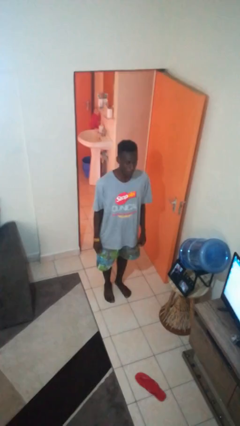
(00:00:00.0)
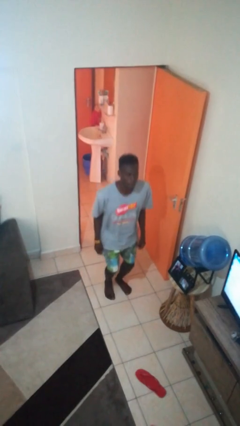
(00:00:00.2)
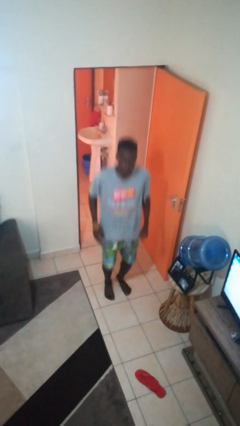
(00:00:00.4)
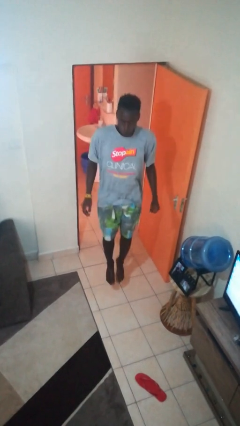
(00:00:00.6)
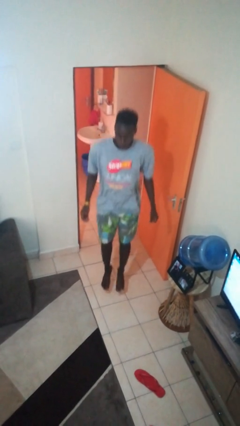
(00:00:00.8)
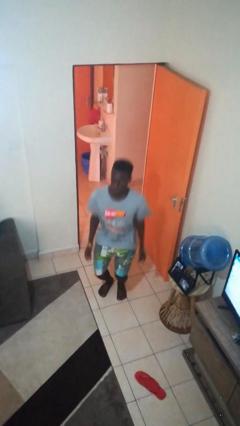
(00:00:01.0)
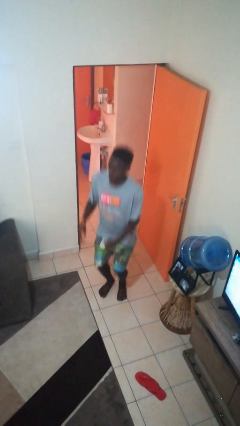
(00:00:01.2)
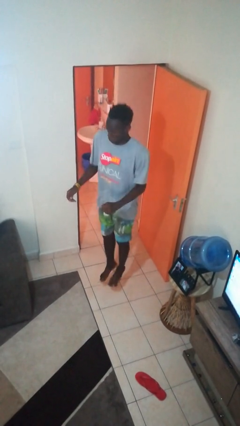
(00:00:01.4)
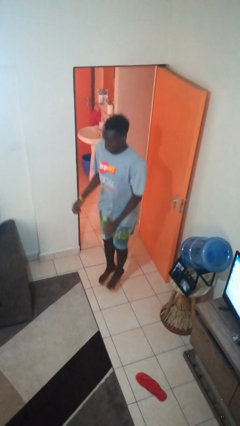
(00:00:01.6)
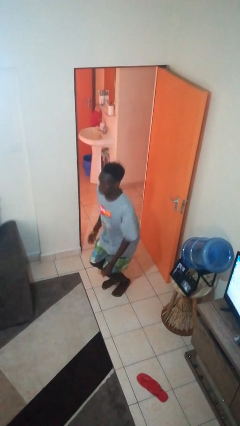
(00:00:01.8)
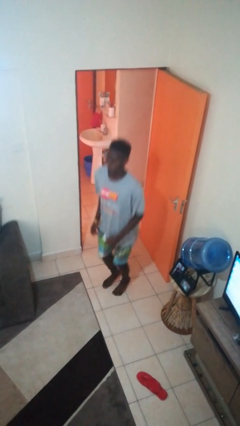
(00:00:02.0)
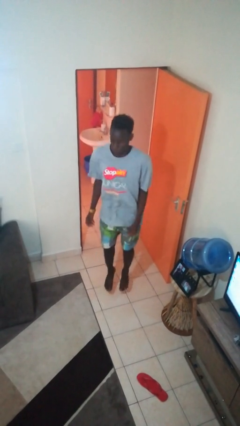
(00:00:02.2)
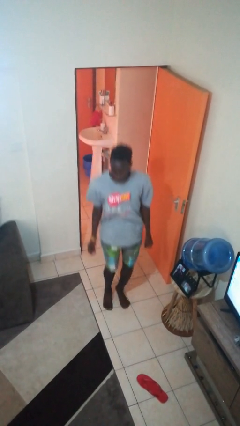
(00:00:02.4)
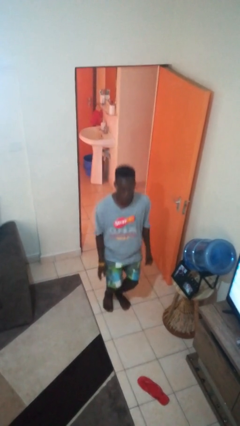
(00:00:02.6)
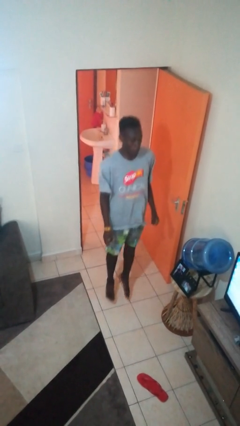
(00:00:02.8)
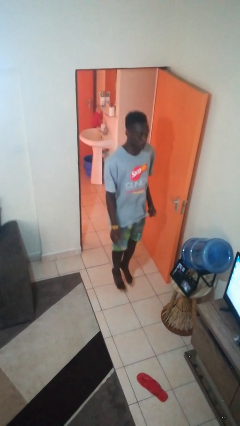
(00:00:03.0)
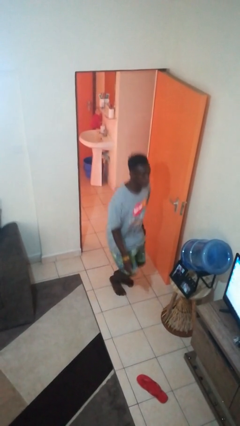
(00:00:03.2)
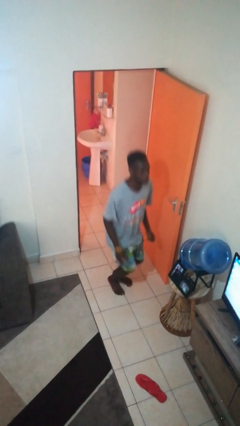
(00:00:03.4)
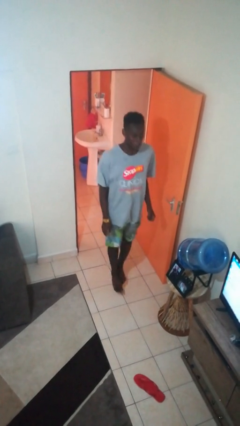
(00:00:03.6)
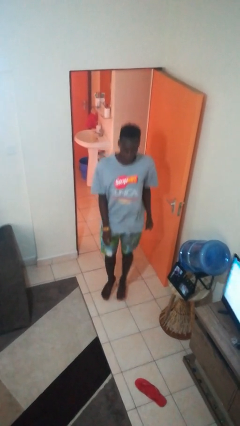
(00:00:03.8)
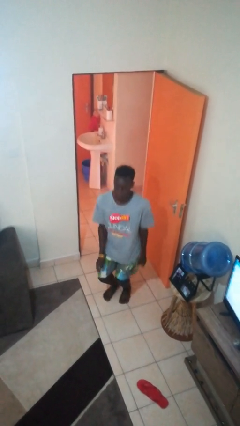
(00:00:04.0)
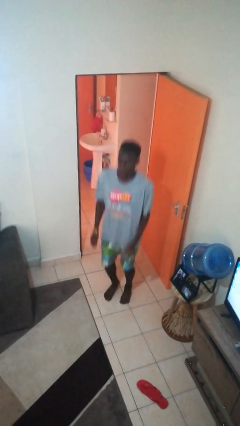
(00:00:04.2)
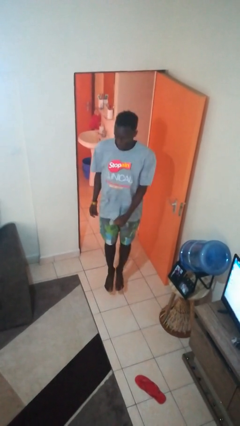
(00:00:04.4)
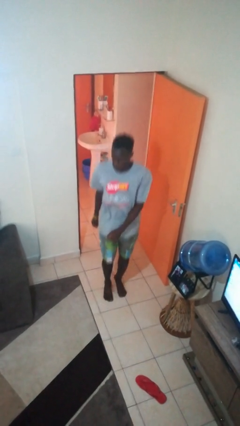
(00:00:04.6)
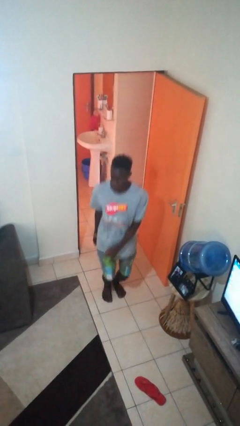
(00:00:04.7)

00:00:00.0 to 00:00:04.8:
person jumps

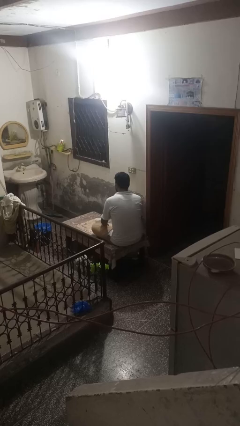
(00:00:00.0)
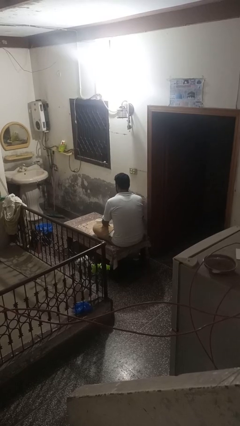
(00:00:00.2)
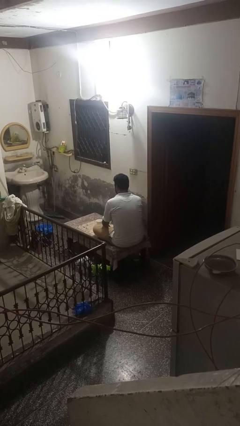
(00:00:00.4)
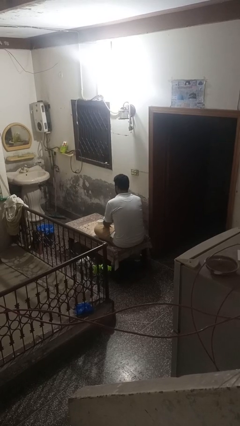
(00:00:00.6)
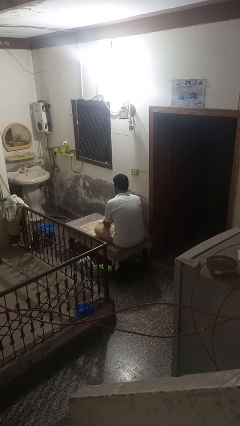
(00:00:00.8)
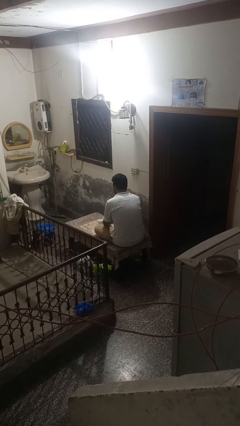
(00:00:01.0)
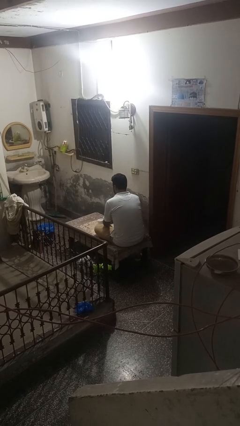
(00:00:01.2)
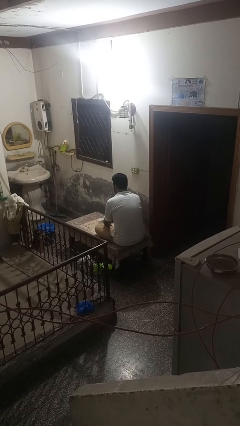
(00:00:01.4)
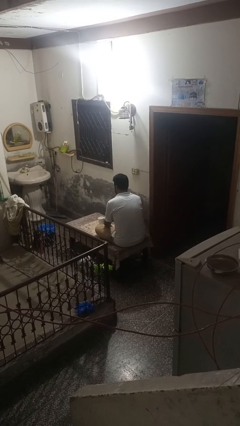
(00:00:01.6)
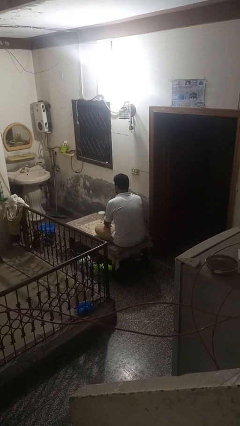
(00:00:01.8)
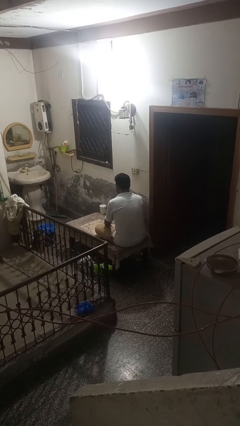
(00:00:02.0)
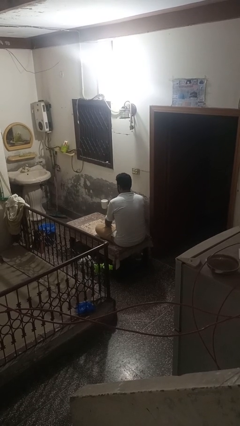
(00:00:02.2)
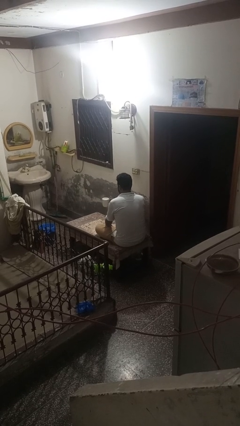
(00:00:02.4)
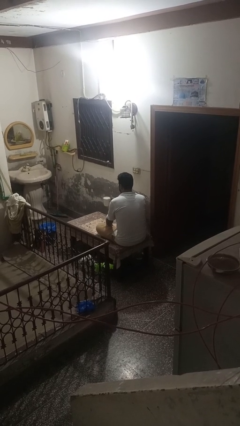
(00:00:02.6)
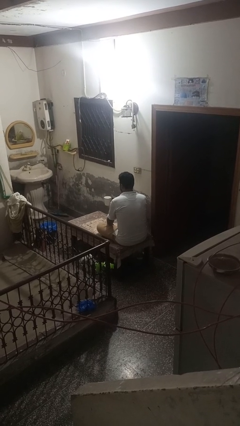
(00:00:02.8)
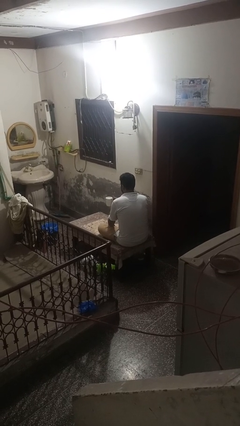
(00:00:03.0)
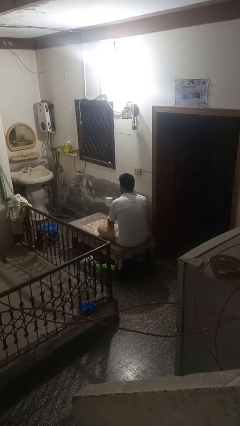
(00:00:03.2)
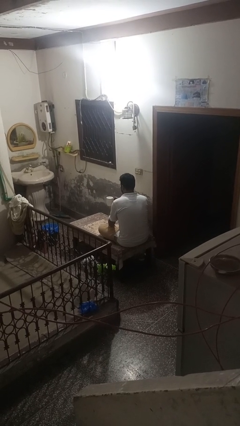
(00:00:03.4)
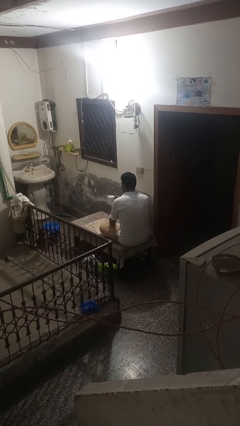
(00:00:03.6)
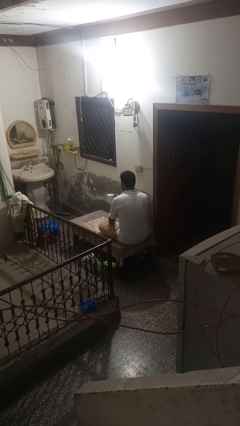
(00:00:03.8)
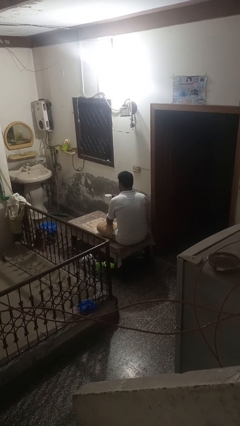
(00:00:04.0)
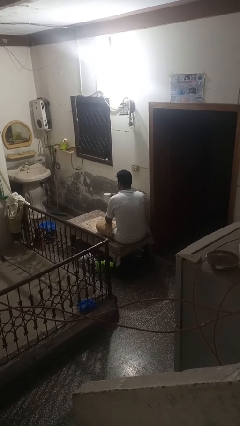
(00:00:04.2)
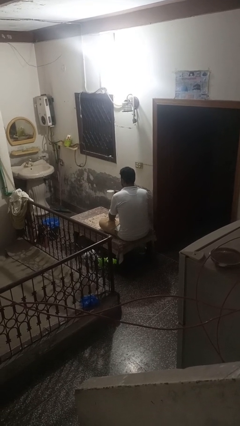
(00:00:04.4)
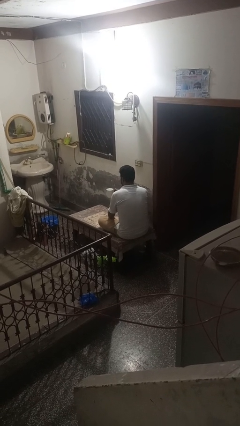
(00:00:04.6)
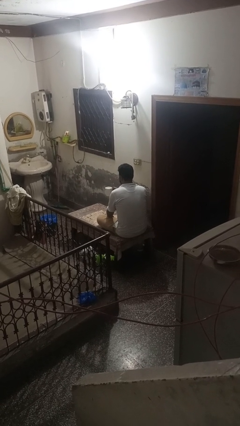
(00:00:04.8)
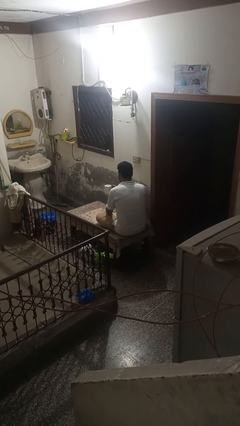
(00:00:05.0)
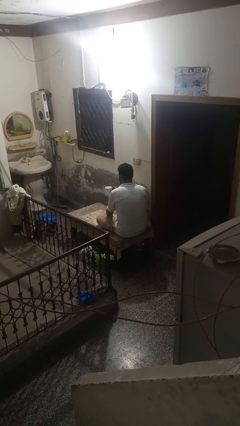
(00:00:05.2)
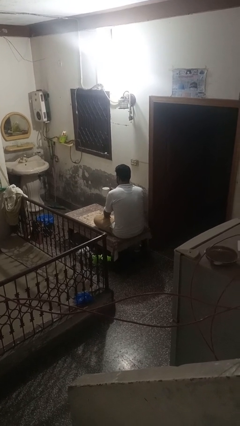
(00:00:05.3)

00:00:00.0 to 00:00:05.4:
person picks up object from table

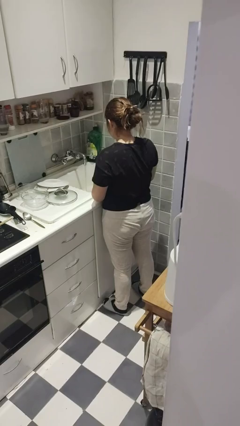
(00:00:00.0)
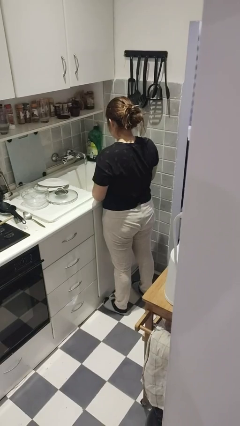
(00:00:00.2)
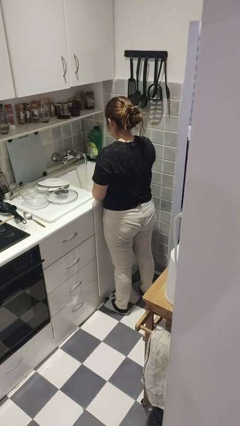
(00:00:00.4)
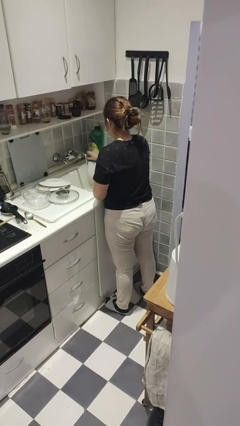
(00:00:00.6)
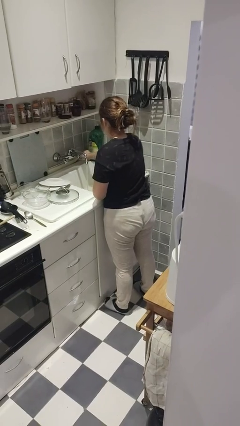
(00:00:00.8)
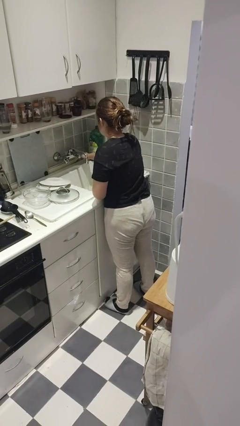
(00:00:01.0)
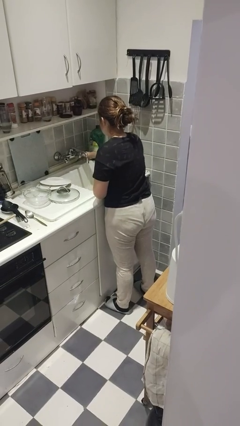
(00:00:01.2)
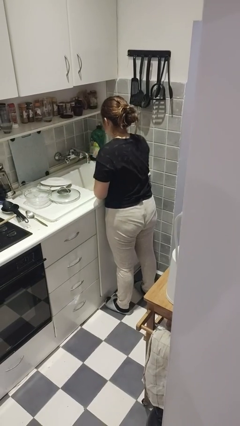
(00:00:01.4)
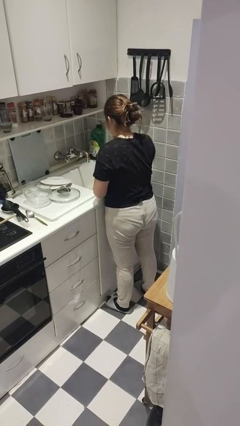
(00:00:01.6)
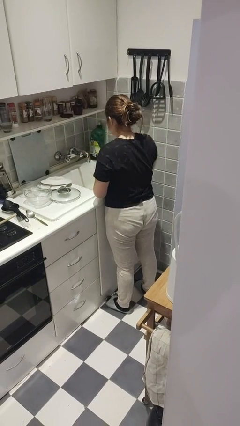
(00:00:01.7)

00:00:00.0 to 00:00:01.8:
person turns off faucet

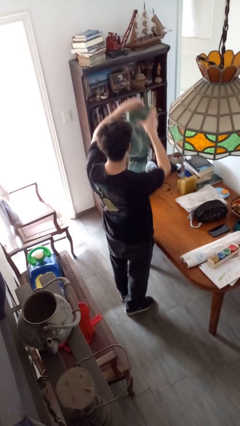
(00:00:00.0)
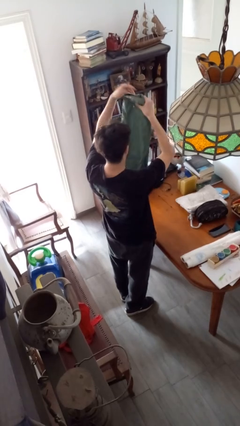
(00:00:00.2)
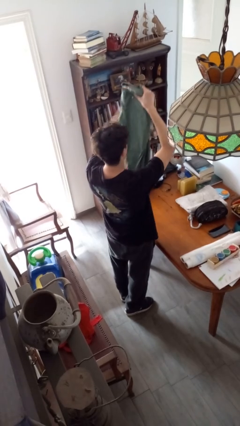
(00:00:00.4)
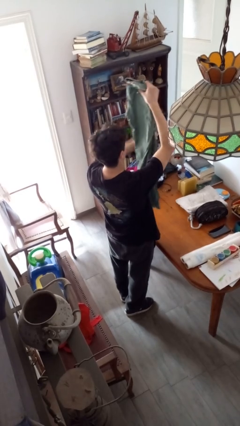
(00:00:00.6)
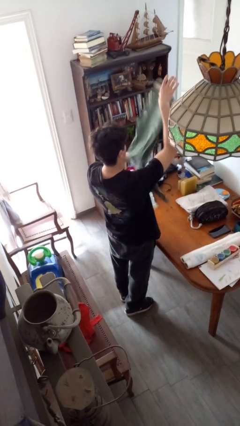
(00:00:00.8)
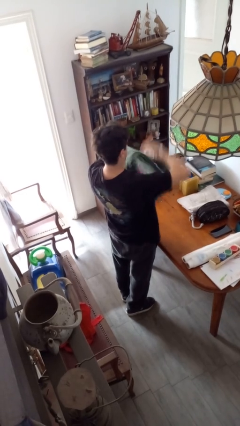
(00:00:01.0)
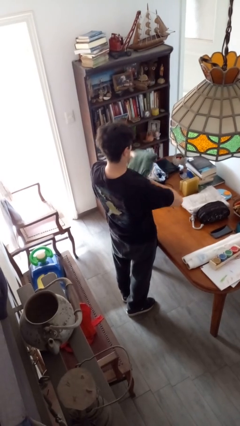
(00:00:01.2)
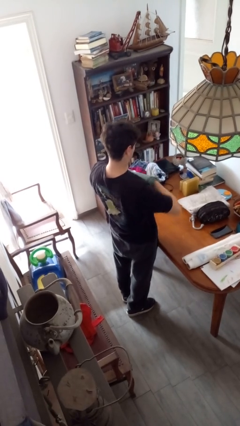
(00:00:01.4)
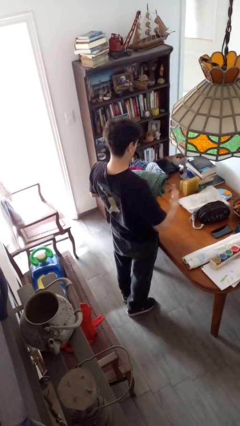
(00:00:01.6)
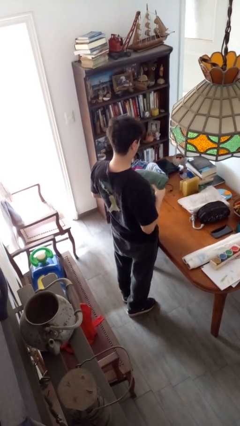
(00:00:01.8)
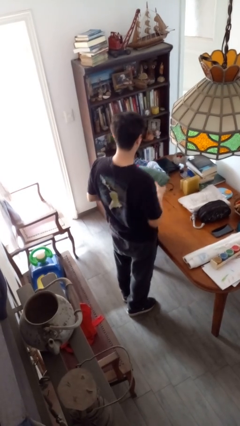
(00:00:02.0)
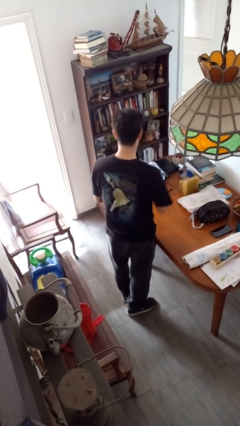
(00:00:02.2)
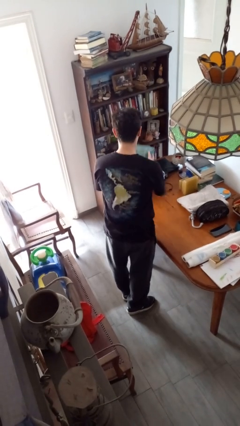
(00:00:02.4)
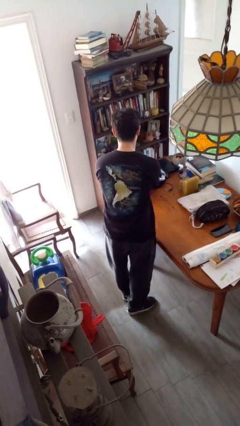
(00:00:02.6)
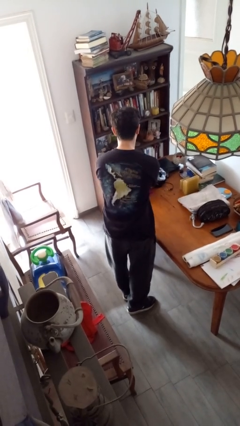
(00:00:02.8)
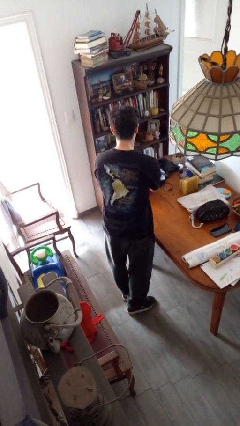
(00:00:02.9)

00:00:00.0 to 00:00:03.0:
person folds shirt

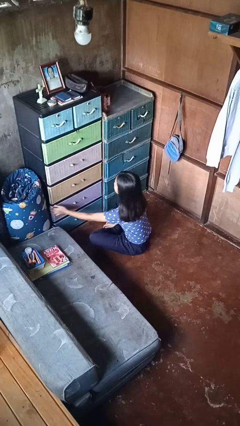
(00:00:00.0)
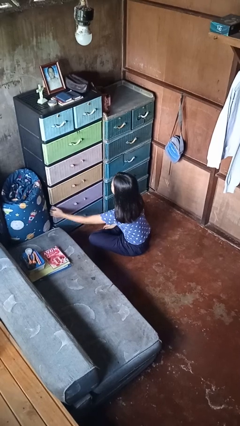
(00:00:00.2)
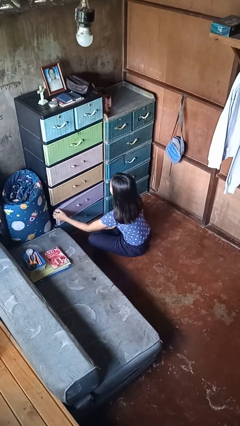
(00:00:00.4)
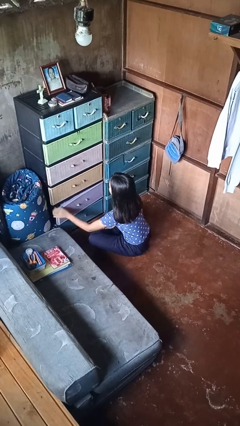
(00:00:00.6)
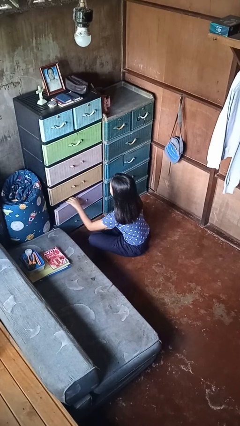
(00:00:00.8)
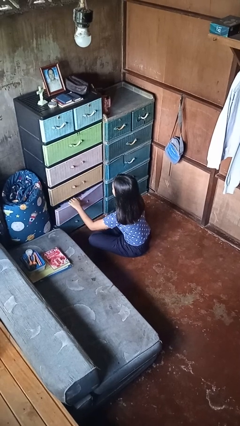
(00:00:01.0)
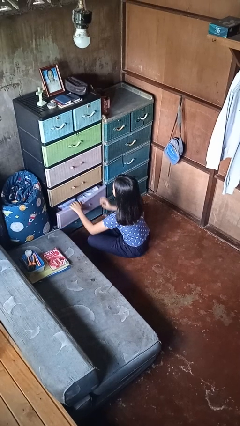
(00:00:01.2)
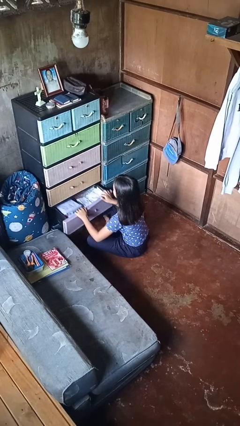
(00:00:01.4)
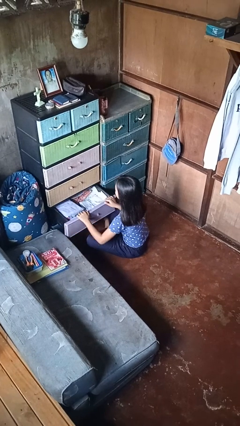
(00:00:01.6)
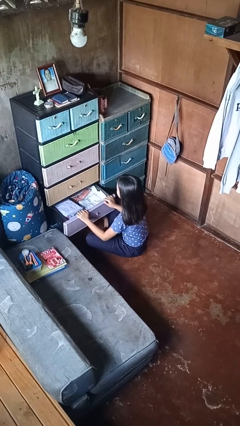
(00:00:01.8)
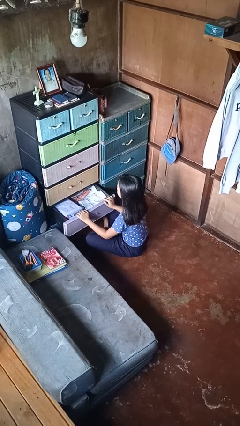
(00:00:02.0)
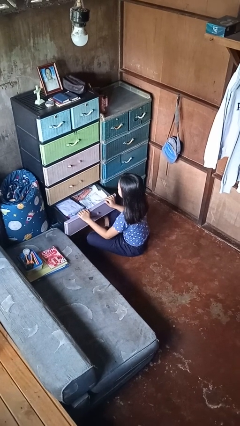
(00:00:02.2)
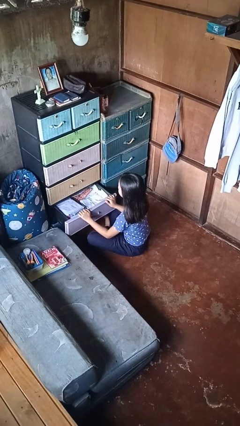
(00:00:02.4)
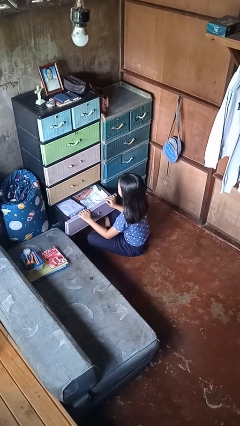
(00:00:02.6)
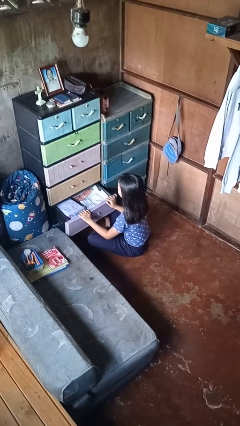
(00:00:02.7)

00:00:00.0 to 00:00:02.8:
person opens dresser drawer
